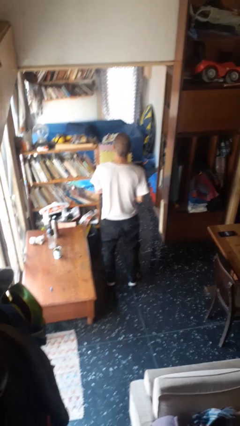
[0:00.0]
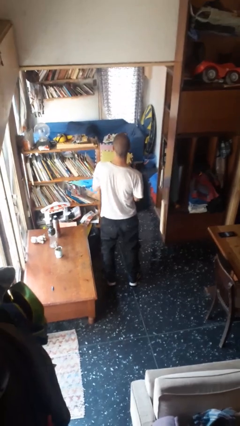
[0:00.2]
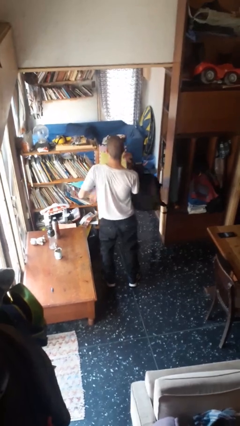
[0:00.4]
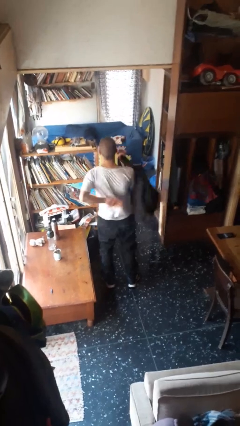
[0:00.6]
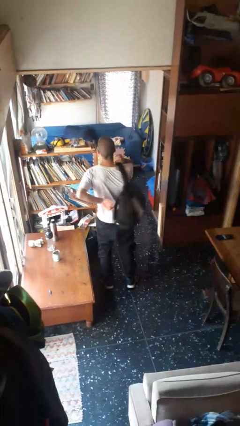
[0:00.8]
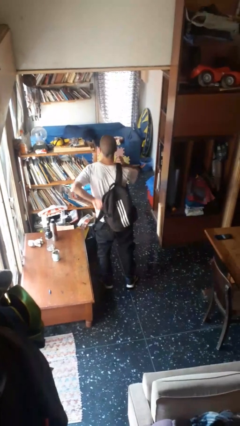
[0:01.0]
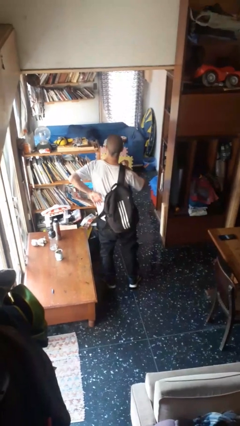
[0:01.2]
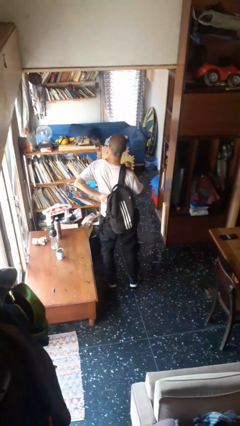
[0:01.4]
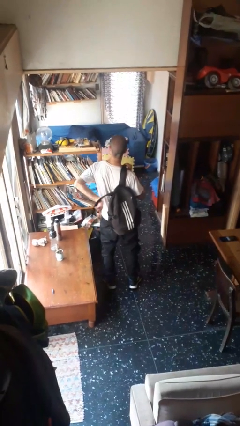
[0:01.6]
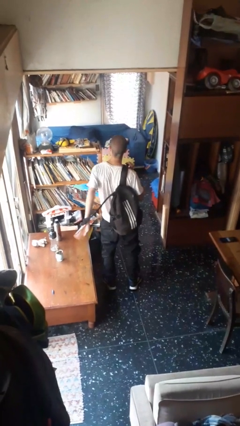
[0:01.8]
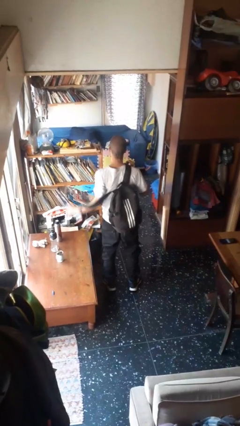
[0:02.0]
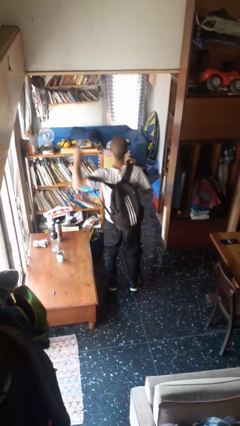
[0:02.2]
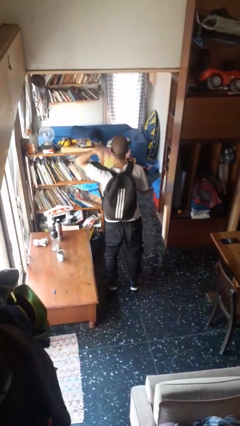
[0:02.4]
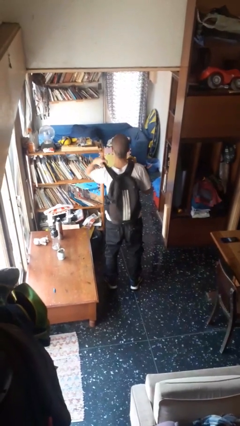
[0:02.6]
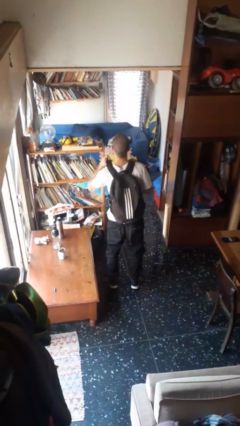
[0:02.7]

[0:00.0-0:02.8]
person puts on backpack

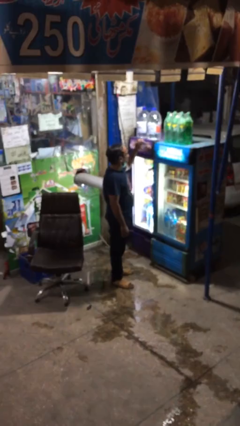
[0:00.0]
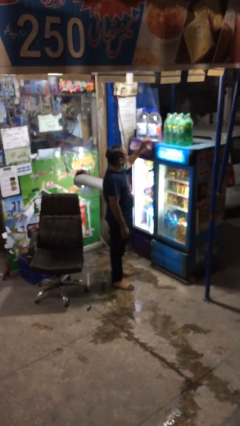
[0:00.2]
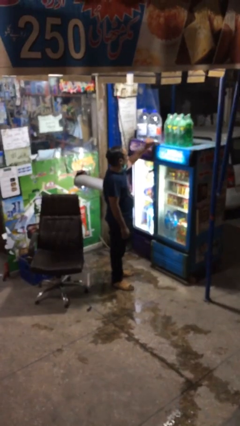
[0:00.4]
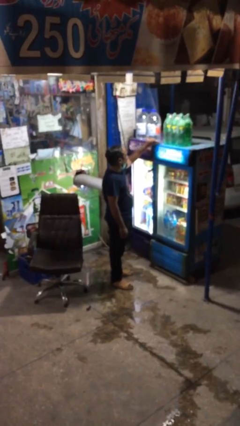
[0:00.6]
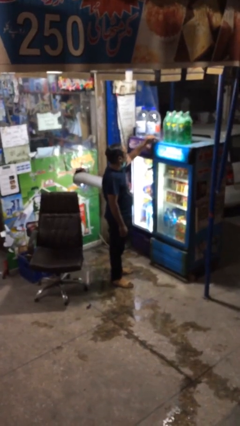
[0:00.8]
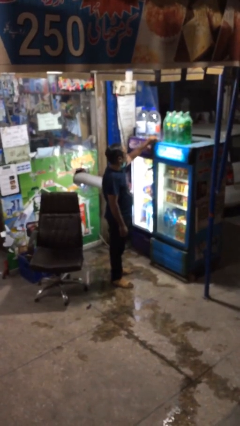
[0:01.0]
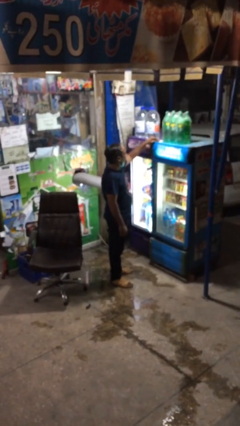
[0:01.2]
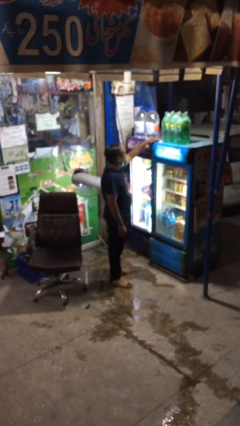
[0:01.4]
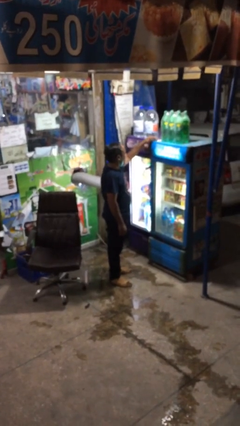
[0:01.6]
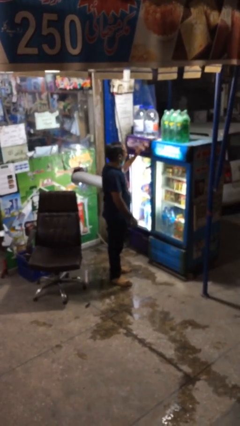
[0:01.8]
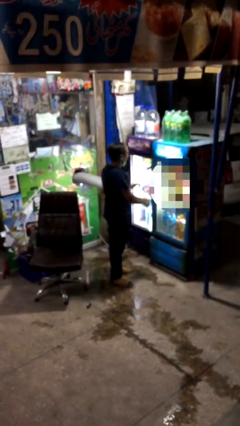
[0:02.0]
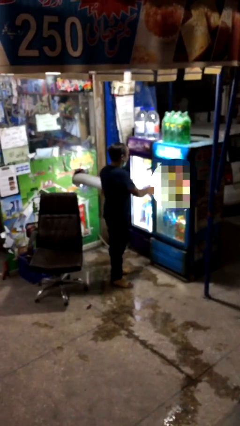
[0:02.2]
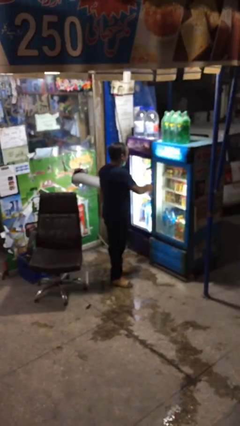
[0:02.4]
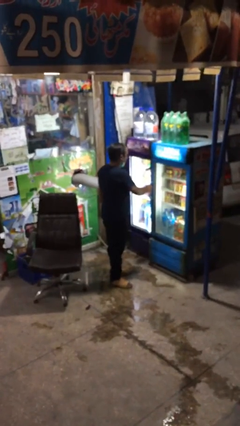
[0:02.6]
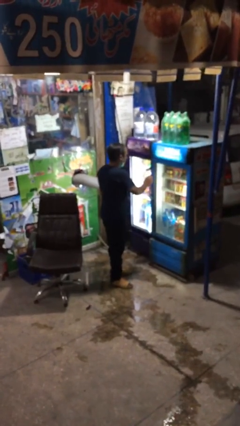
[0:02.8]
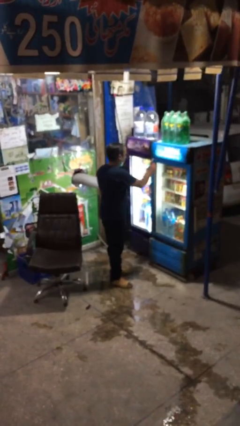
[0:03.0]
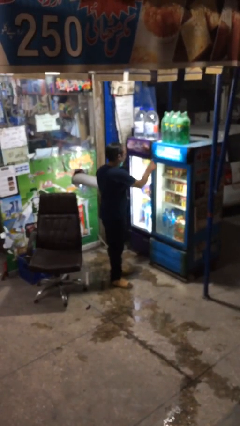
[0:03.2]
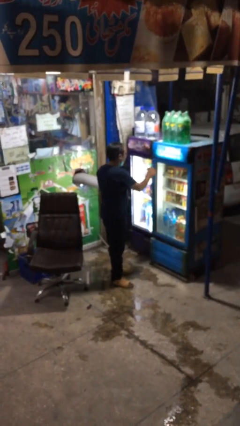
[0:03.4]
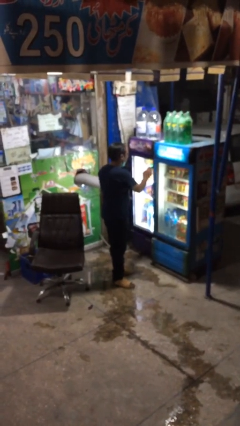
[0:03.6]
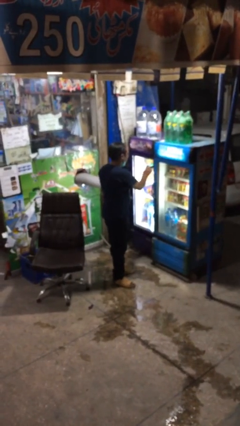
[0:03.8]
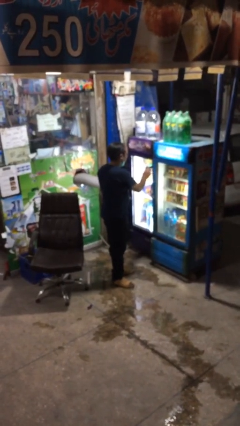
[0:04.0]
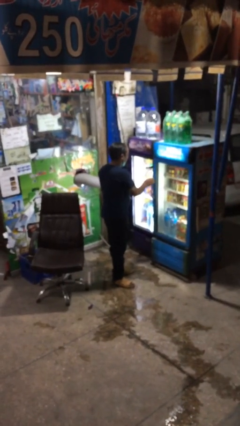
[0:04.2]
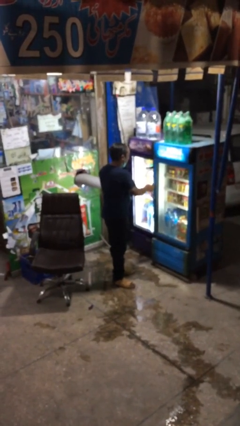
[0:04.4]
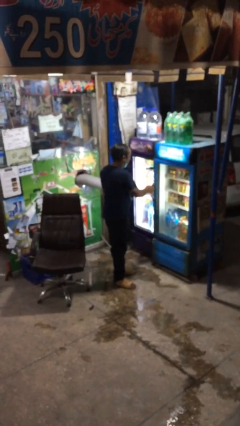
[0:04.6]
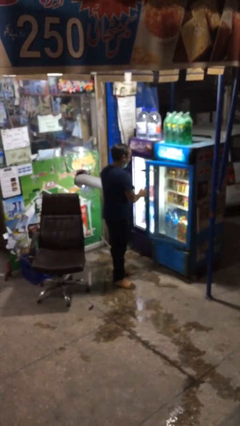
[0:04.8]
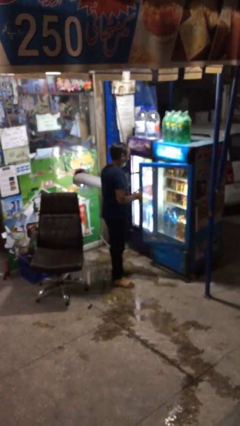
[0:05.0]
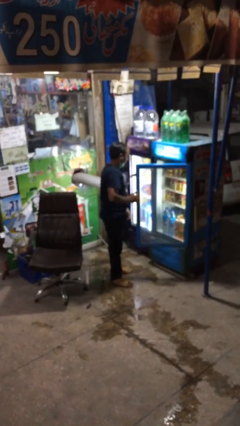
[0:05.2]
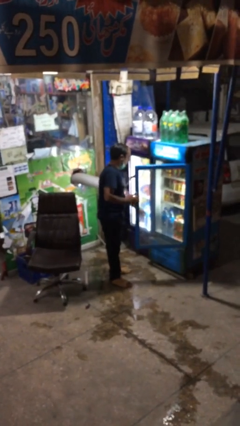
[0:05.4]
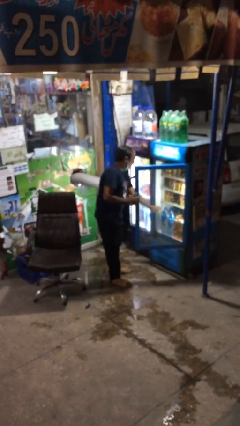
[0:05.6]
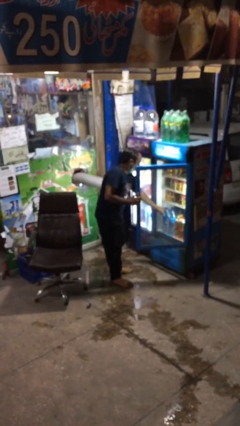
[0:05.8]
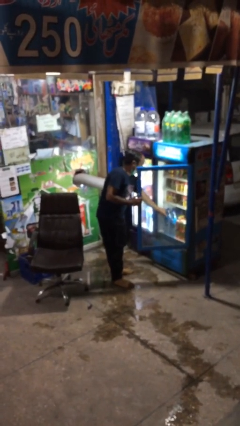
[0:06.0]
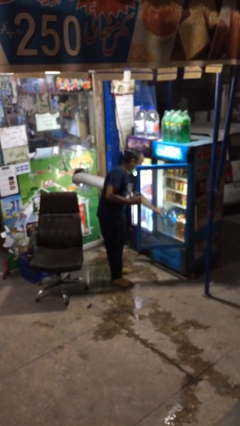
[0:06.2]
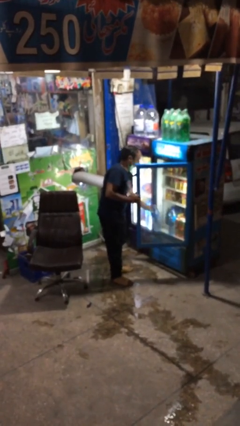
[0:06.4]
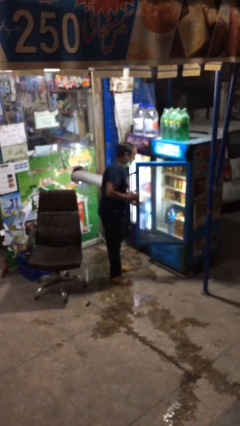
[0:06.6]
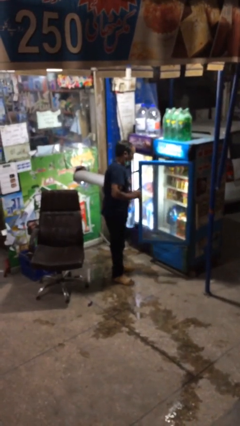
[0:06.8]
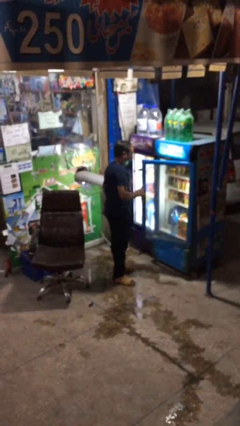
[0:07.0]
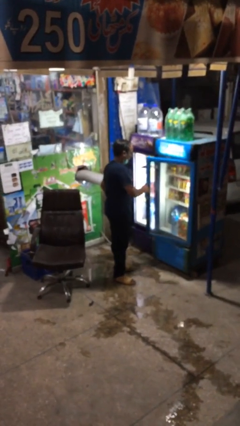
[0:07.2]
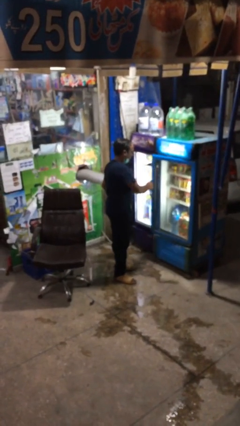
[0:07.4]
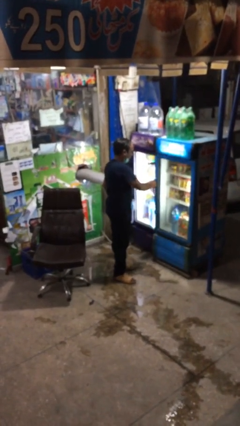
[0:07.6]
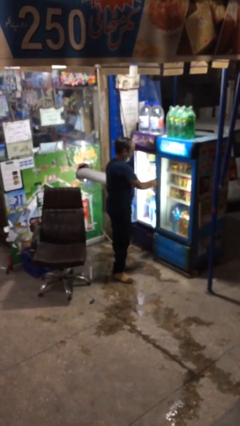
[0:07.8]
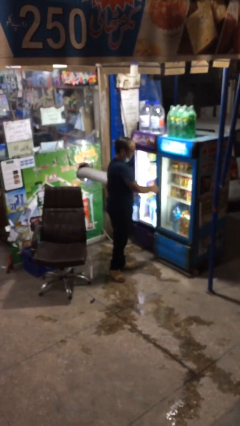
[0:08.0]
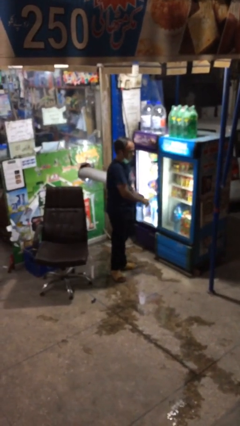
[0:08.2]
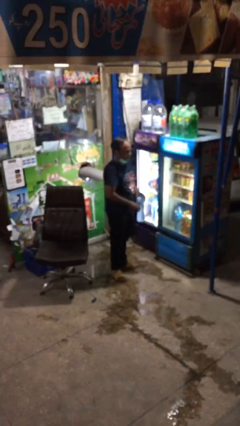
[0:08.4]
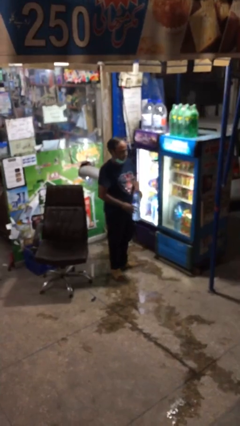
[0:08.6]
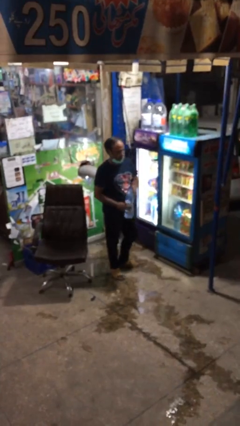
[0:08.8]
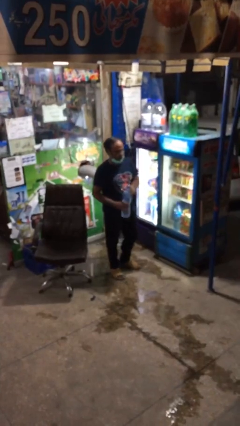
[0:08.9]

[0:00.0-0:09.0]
person purchases from machine

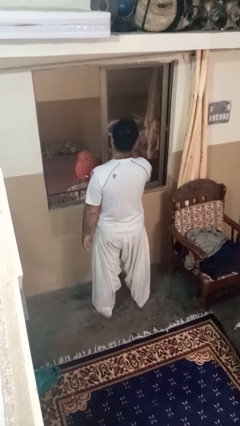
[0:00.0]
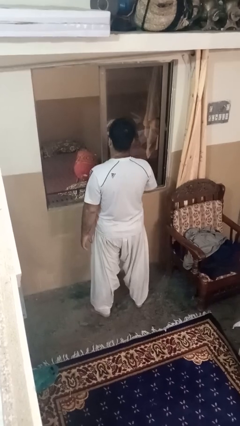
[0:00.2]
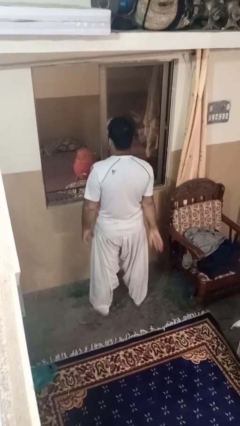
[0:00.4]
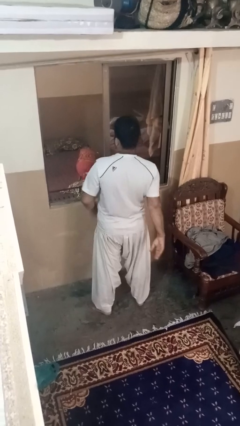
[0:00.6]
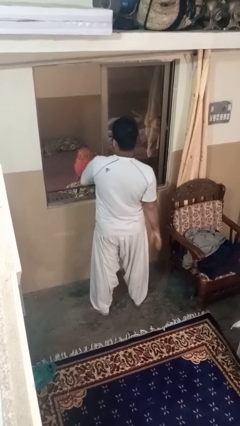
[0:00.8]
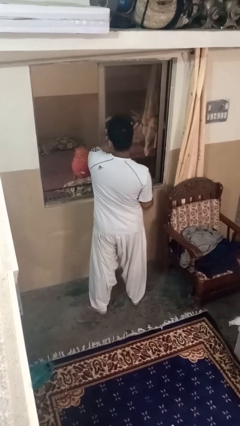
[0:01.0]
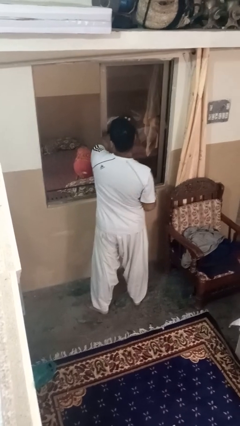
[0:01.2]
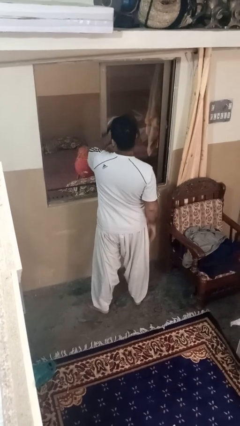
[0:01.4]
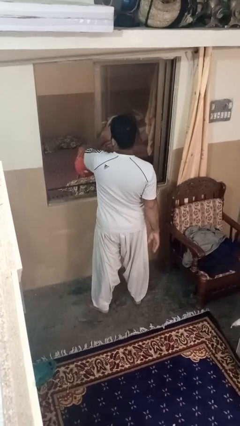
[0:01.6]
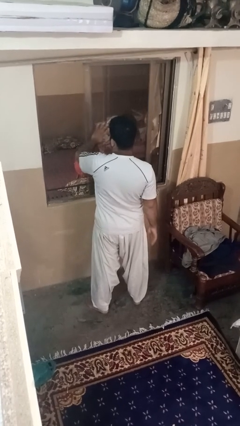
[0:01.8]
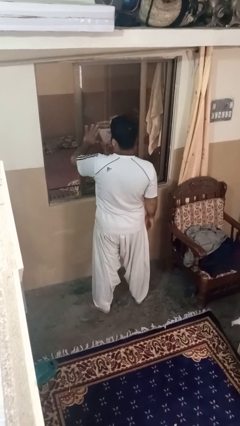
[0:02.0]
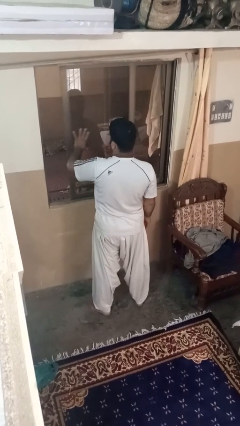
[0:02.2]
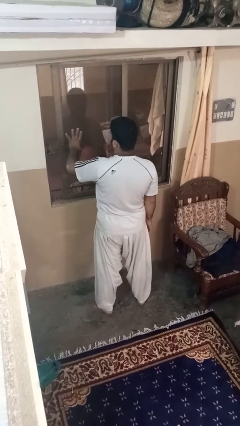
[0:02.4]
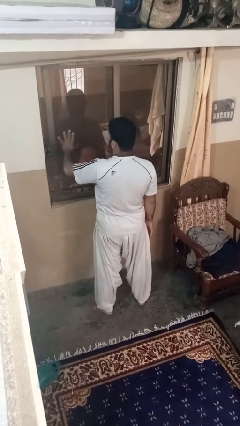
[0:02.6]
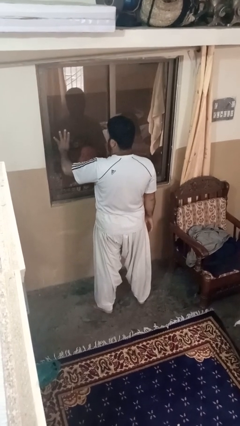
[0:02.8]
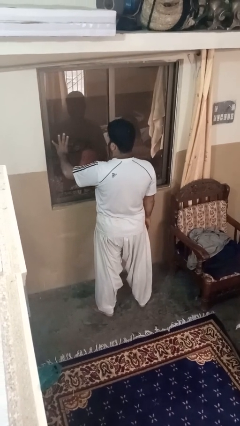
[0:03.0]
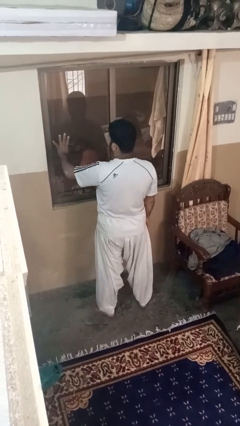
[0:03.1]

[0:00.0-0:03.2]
person closes home window

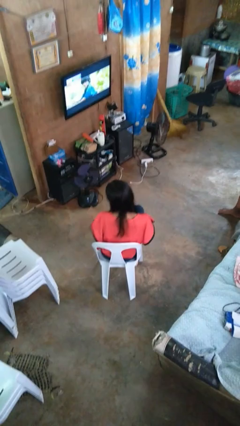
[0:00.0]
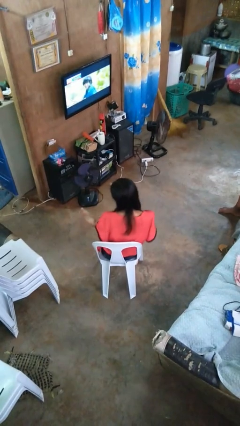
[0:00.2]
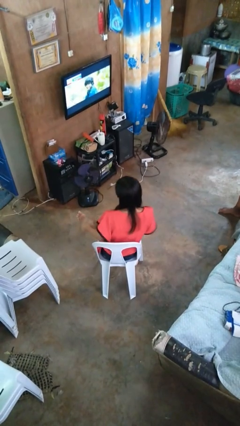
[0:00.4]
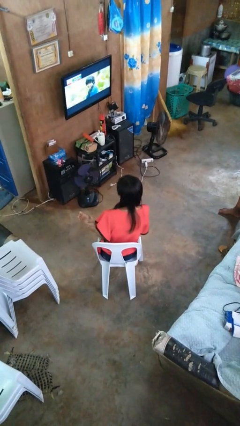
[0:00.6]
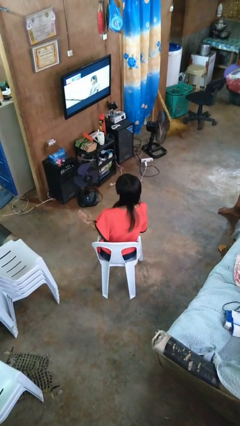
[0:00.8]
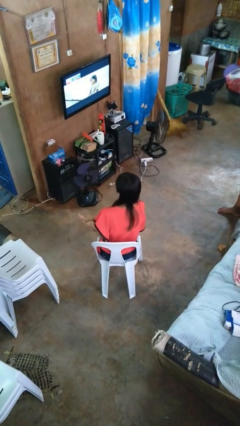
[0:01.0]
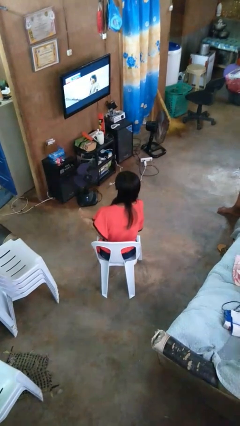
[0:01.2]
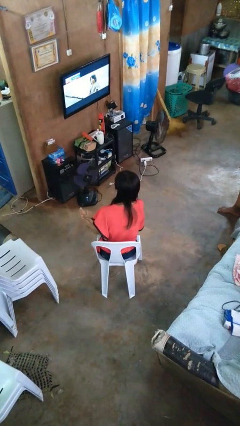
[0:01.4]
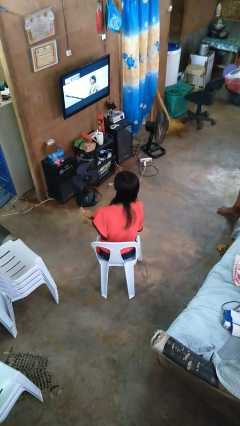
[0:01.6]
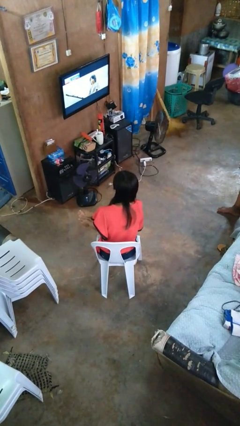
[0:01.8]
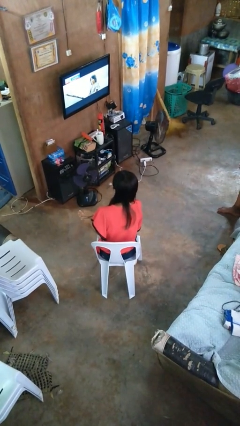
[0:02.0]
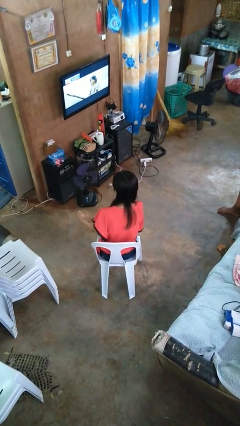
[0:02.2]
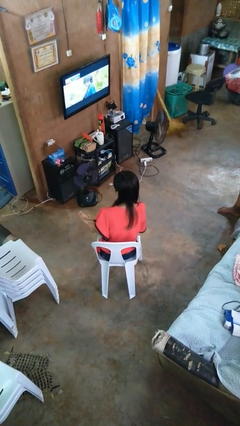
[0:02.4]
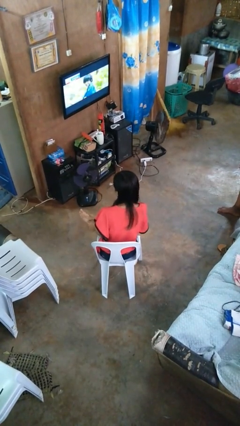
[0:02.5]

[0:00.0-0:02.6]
person rubs foot

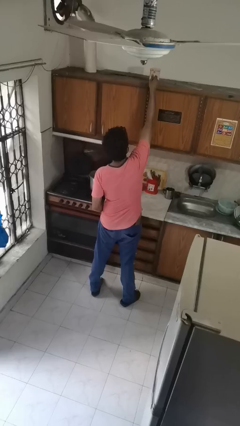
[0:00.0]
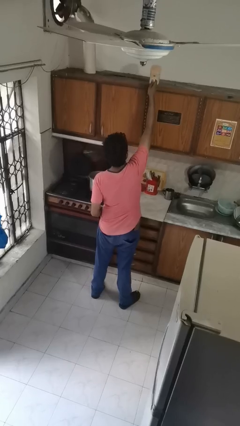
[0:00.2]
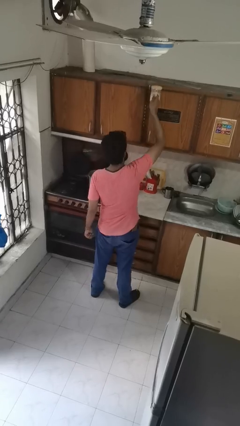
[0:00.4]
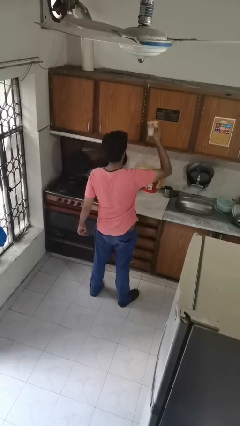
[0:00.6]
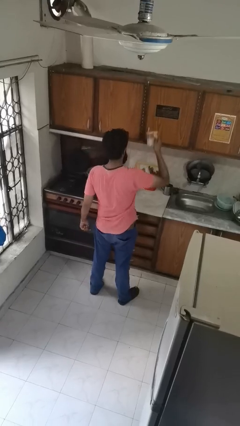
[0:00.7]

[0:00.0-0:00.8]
person picks up object from shelf
